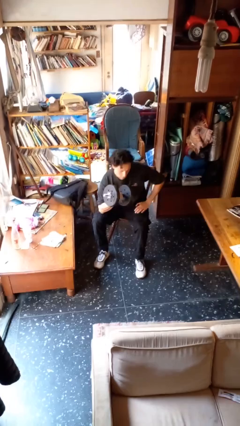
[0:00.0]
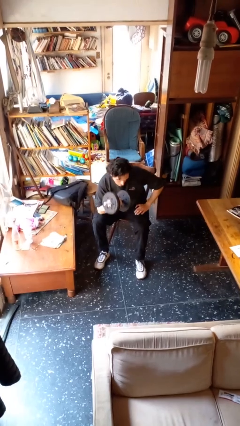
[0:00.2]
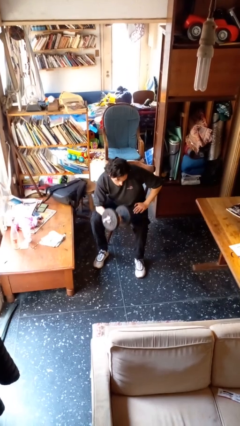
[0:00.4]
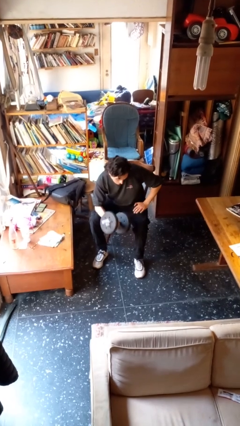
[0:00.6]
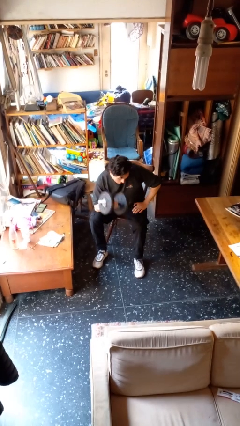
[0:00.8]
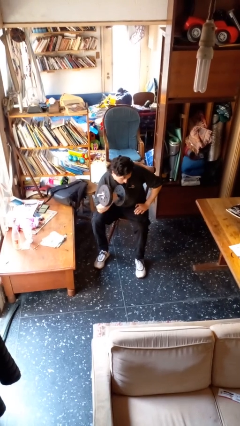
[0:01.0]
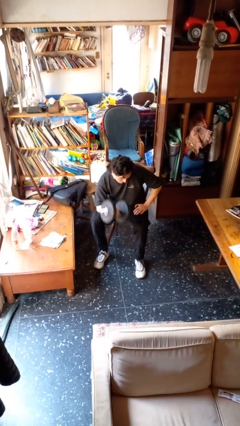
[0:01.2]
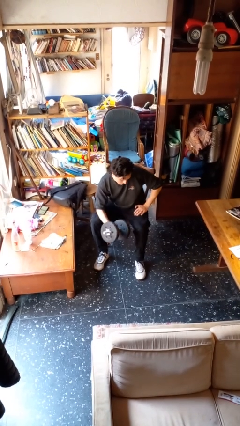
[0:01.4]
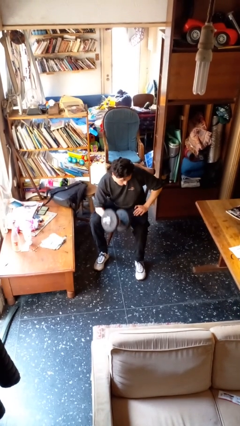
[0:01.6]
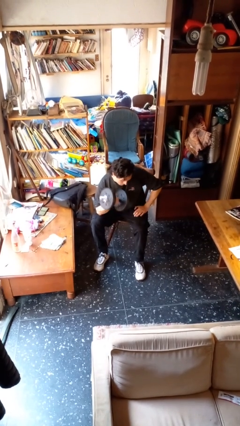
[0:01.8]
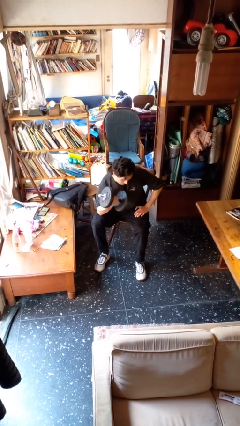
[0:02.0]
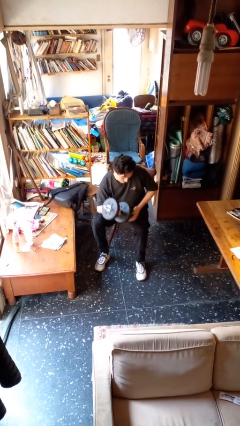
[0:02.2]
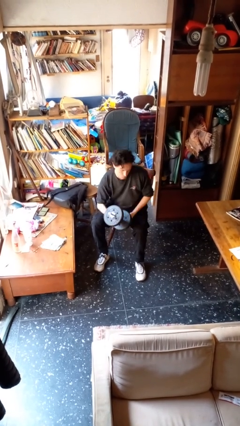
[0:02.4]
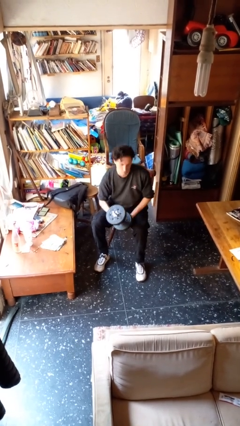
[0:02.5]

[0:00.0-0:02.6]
person lifts dumbbells

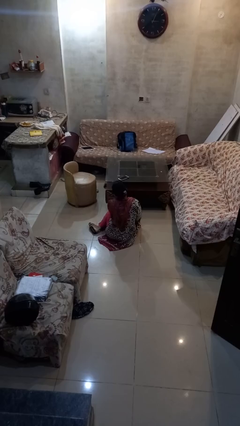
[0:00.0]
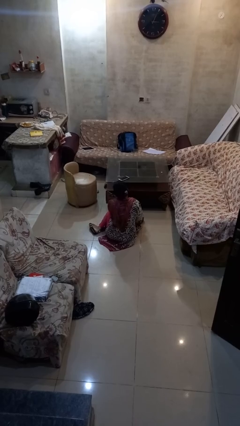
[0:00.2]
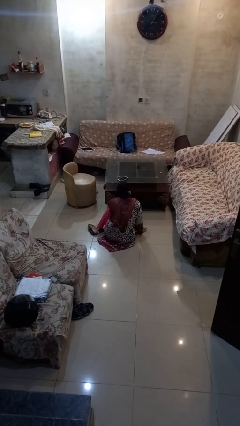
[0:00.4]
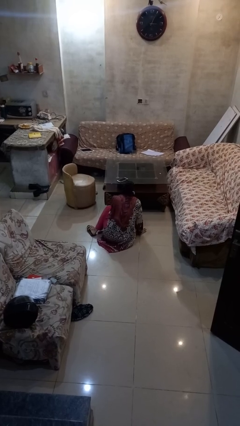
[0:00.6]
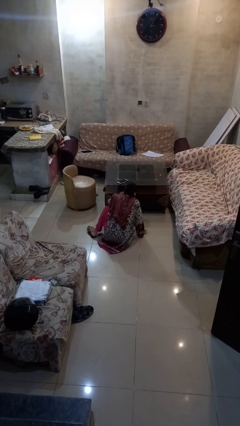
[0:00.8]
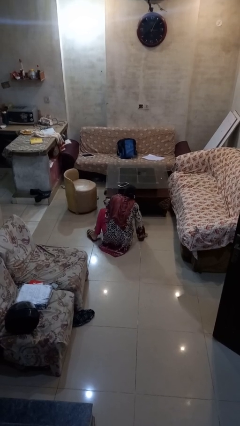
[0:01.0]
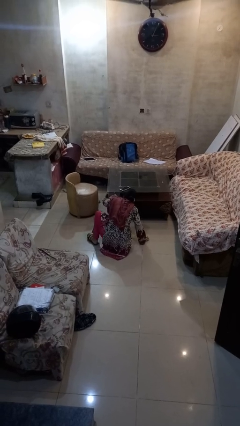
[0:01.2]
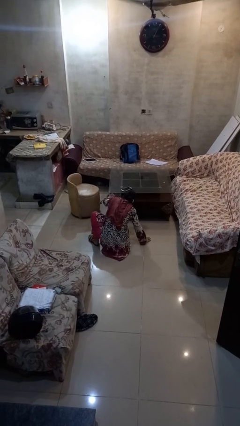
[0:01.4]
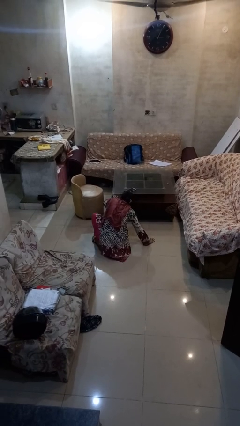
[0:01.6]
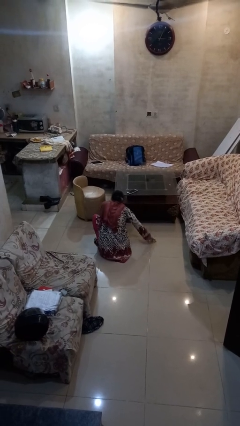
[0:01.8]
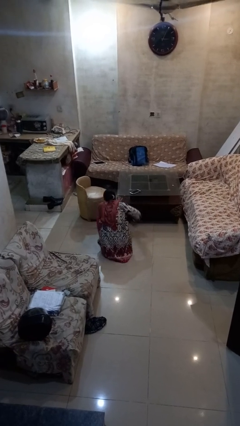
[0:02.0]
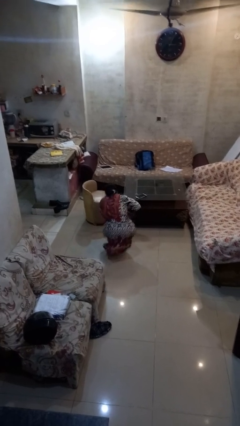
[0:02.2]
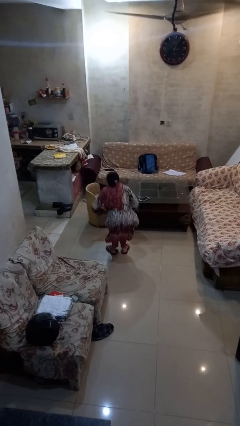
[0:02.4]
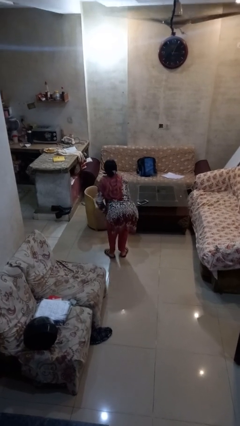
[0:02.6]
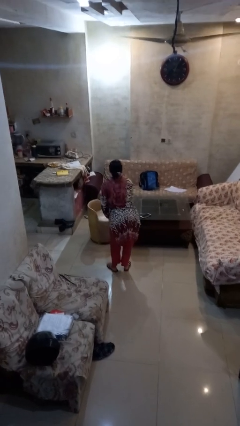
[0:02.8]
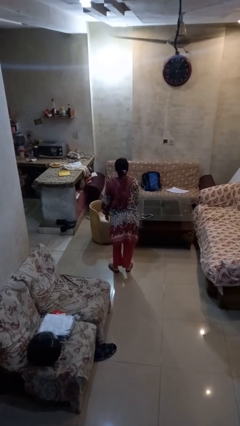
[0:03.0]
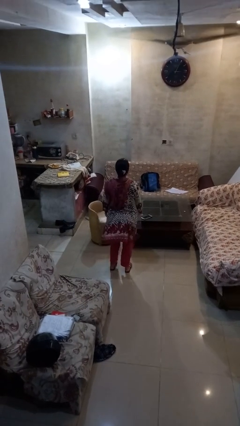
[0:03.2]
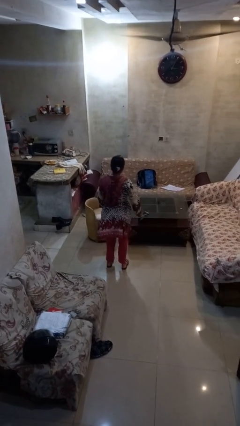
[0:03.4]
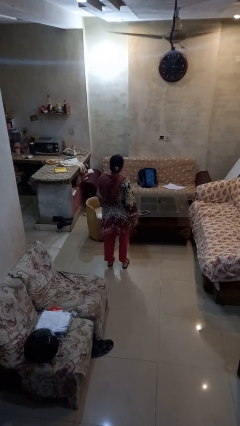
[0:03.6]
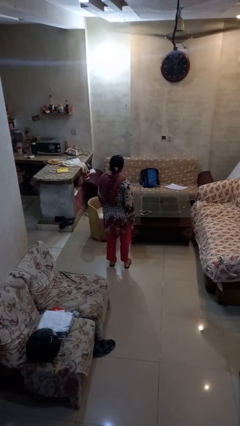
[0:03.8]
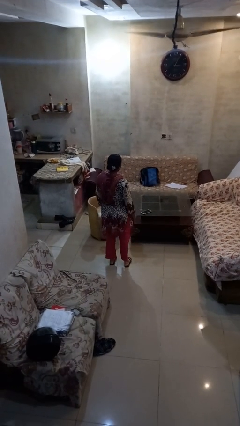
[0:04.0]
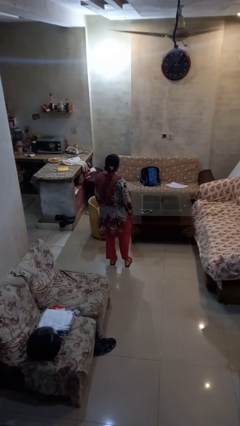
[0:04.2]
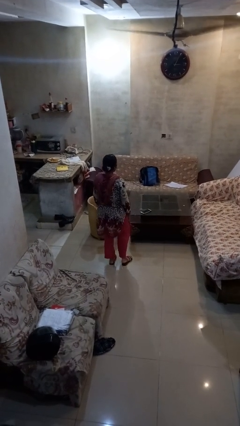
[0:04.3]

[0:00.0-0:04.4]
person stands up from floor

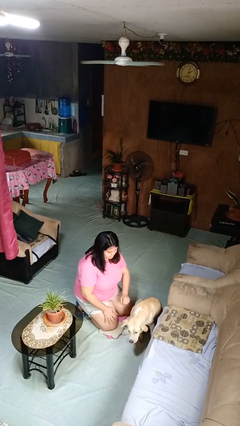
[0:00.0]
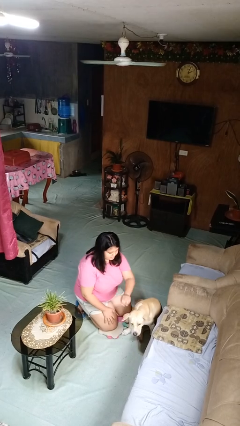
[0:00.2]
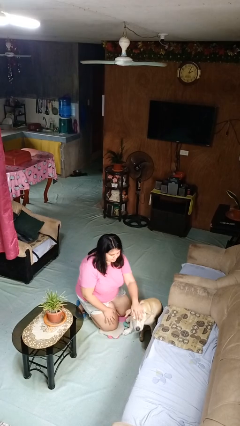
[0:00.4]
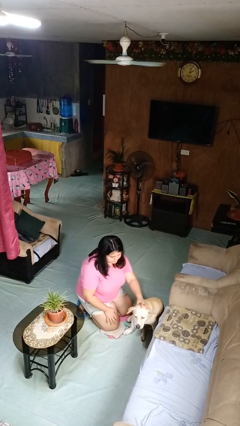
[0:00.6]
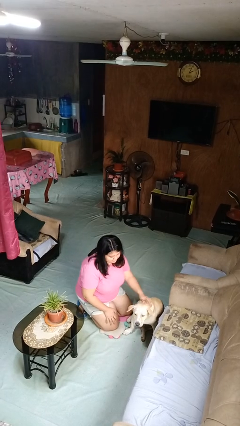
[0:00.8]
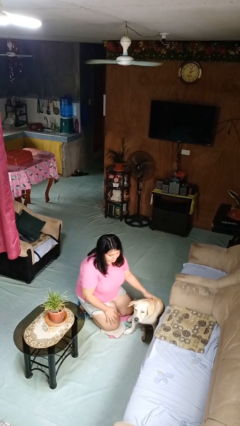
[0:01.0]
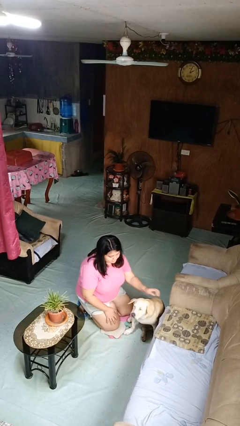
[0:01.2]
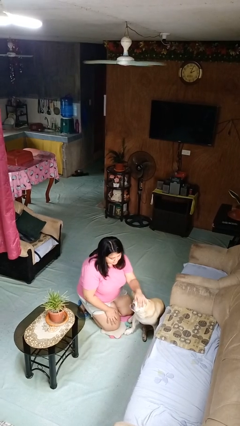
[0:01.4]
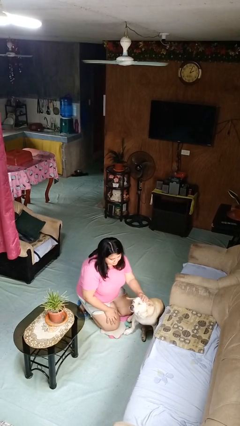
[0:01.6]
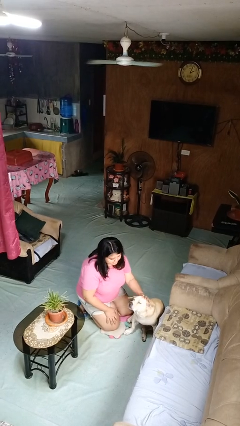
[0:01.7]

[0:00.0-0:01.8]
person pets dog

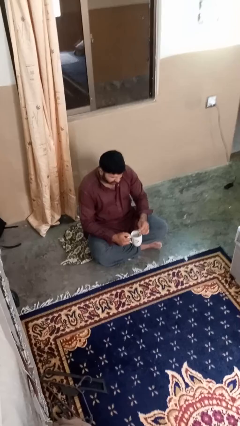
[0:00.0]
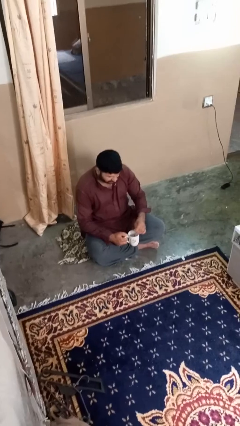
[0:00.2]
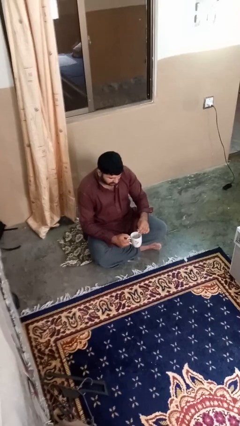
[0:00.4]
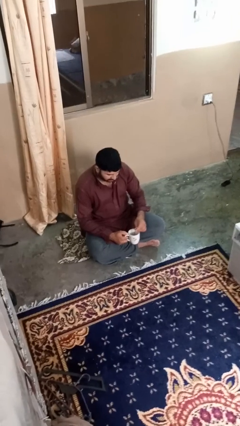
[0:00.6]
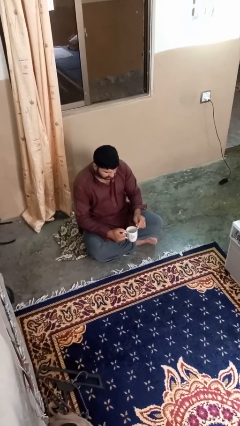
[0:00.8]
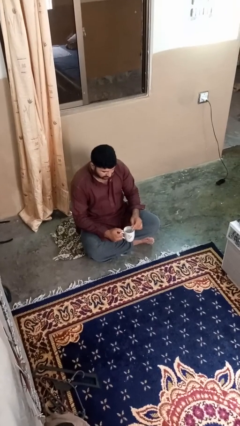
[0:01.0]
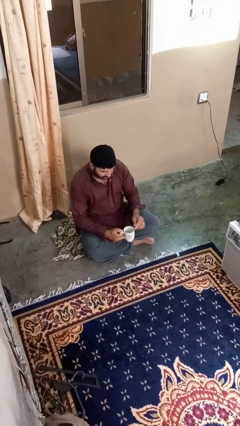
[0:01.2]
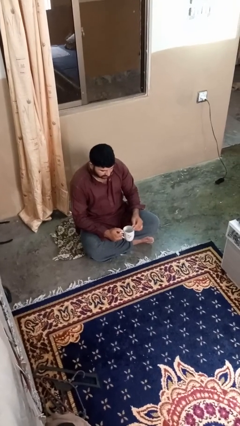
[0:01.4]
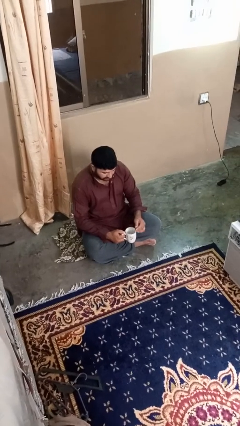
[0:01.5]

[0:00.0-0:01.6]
person stirs mug

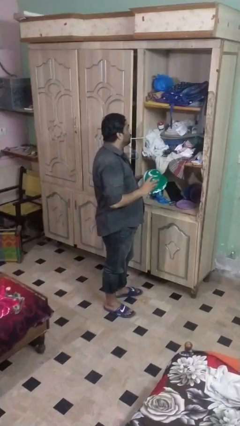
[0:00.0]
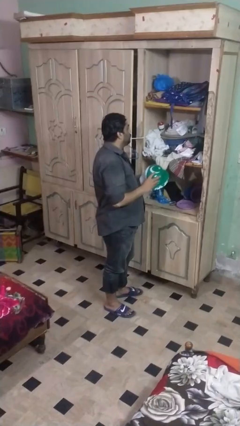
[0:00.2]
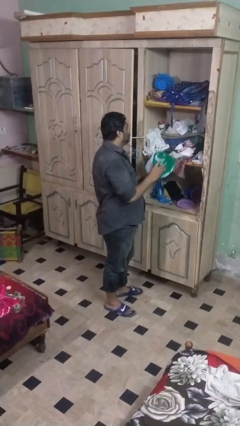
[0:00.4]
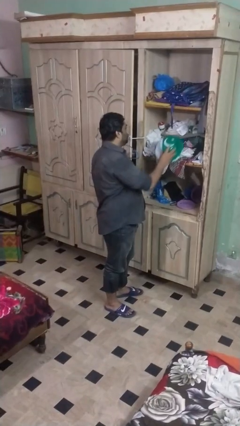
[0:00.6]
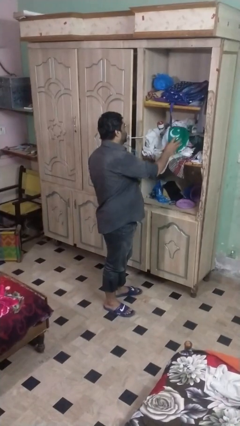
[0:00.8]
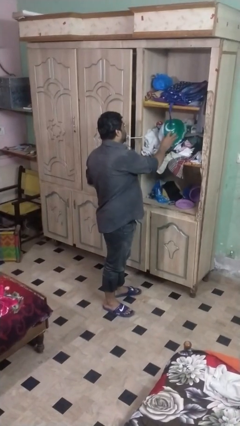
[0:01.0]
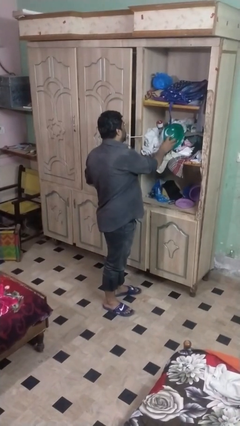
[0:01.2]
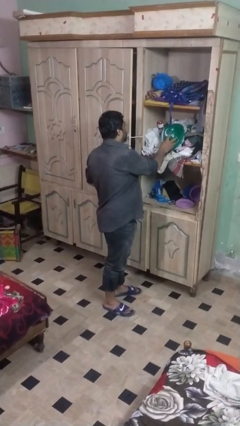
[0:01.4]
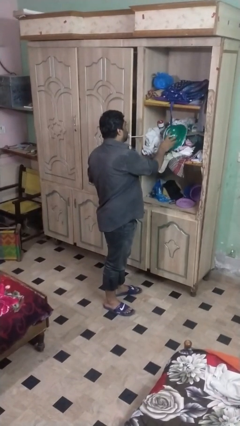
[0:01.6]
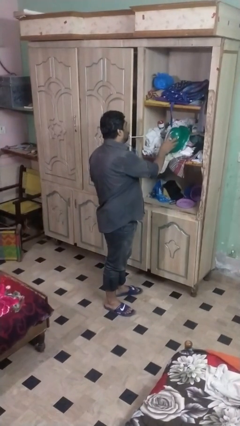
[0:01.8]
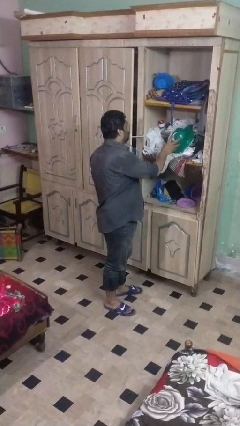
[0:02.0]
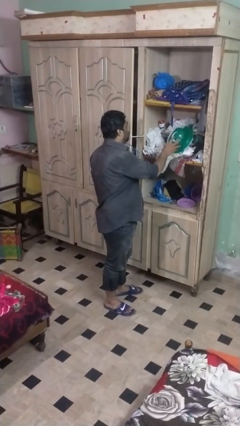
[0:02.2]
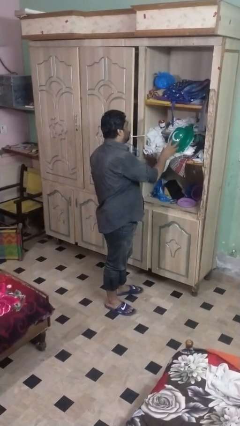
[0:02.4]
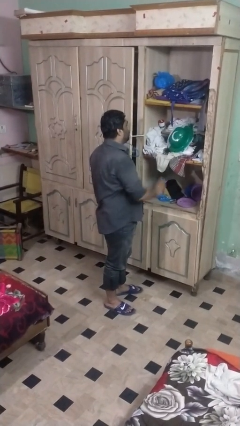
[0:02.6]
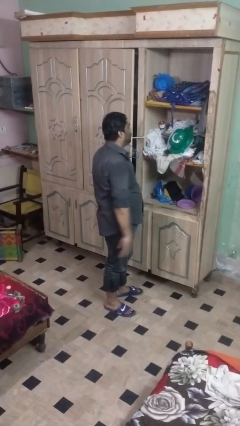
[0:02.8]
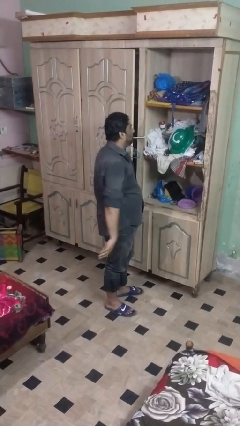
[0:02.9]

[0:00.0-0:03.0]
person puts down object on shelf

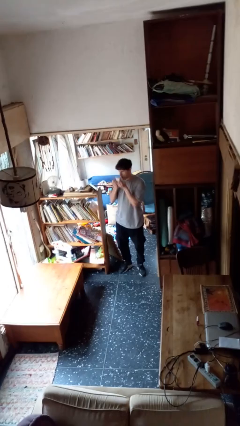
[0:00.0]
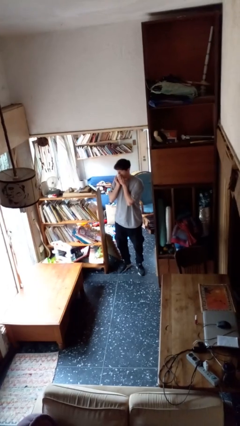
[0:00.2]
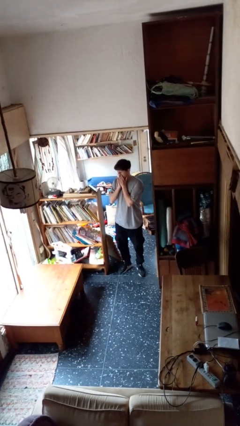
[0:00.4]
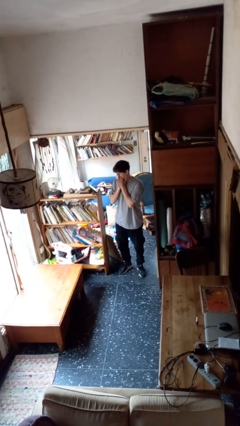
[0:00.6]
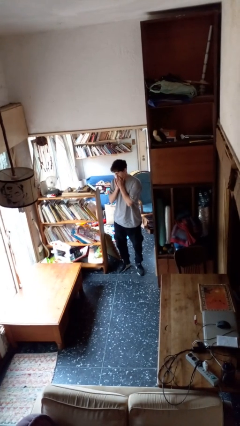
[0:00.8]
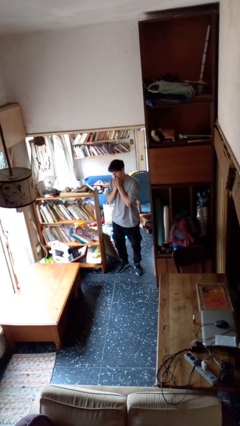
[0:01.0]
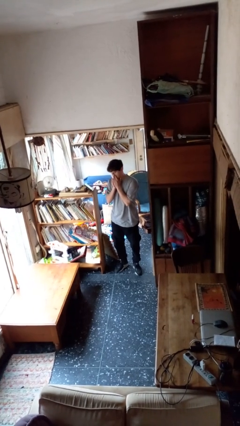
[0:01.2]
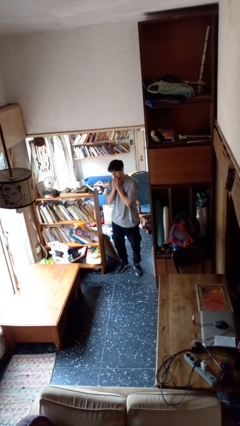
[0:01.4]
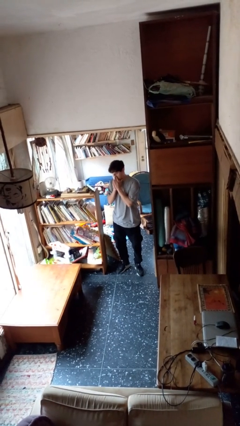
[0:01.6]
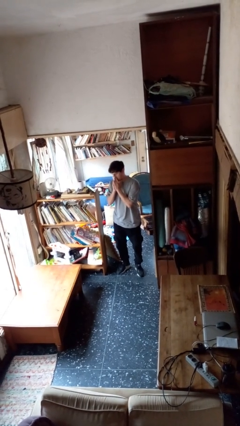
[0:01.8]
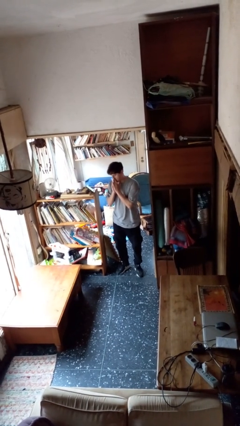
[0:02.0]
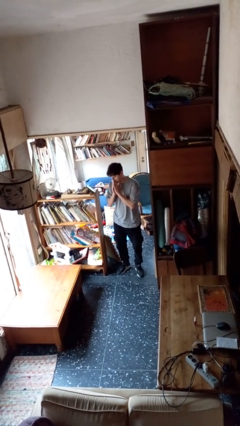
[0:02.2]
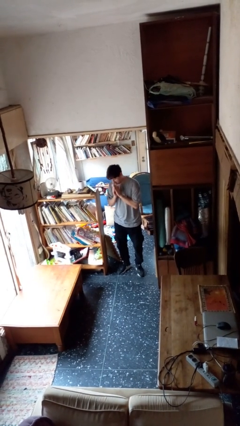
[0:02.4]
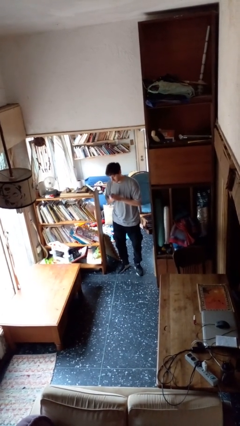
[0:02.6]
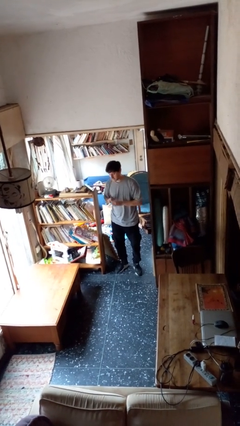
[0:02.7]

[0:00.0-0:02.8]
person blows nose

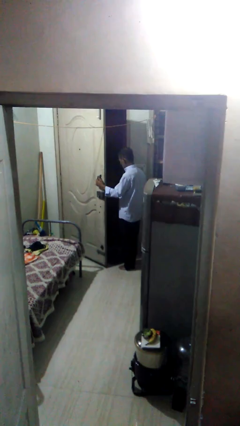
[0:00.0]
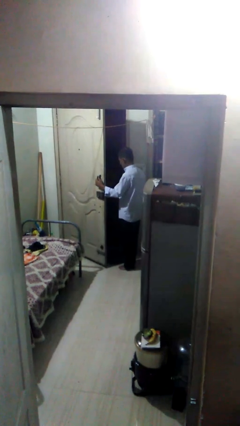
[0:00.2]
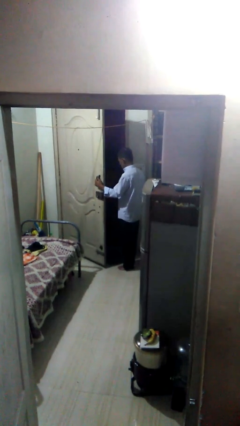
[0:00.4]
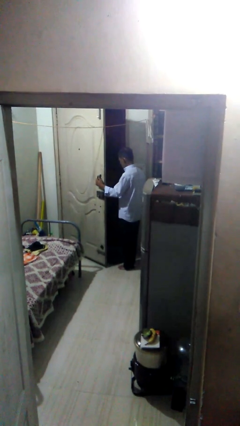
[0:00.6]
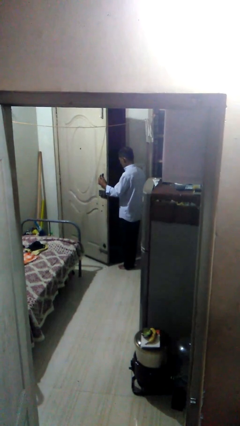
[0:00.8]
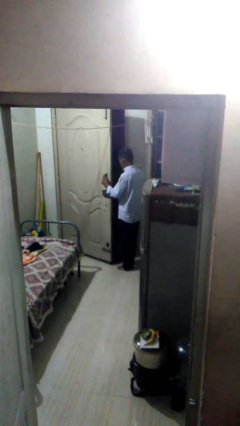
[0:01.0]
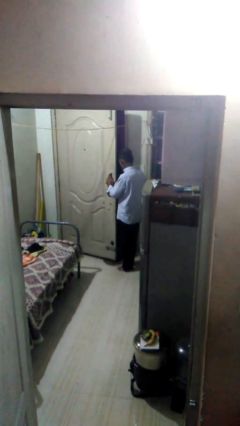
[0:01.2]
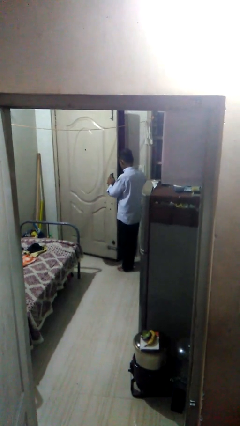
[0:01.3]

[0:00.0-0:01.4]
person closes facility door
